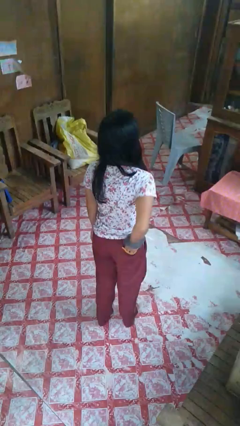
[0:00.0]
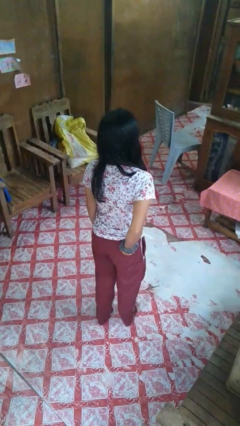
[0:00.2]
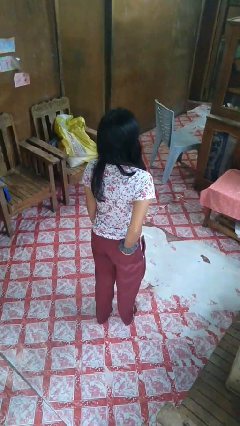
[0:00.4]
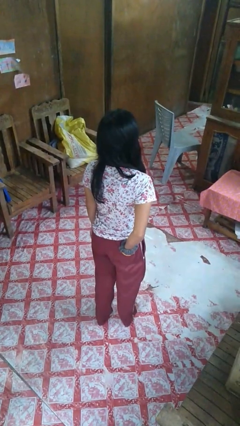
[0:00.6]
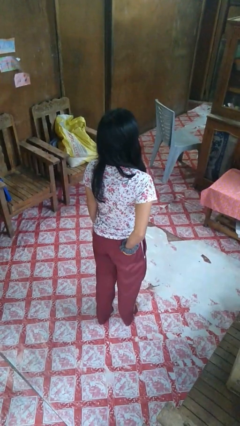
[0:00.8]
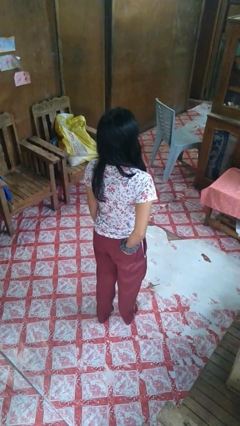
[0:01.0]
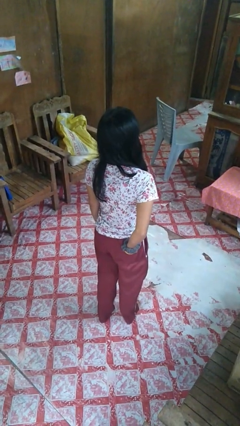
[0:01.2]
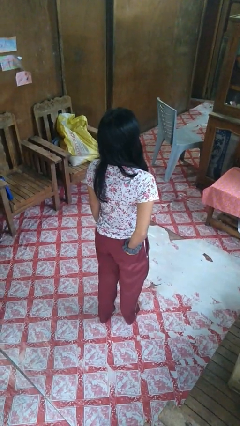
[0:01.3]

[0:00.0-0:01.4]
person puts hands in back pockets

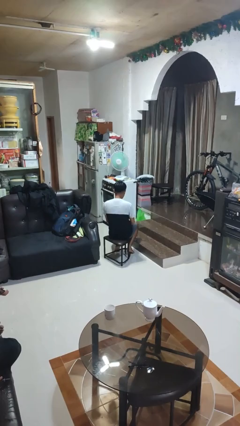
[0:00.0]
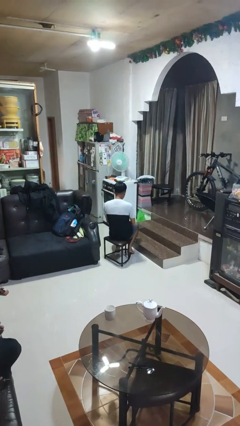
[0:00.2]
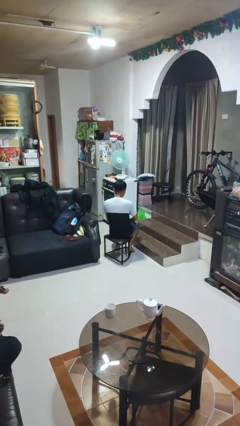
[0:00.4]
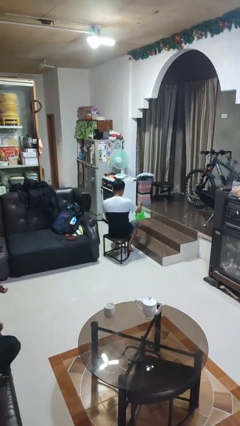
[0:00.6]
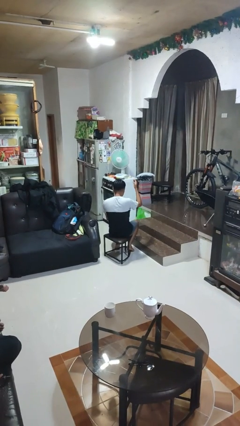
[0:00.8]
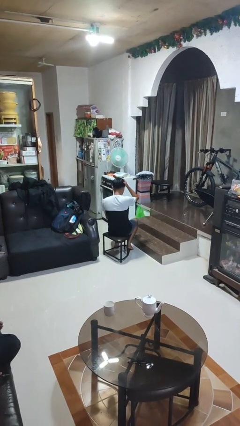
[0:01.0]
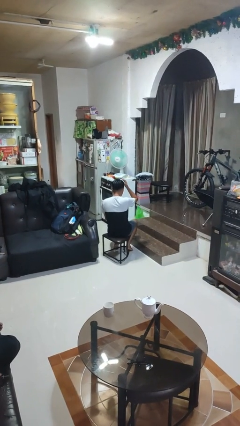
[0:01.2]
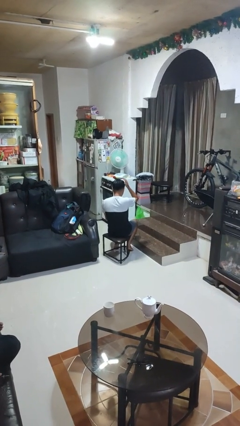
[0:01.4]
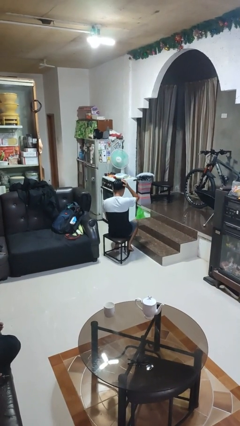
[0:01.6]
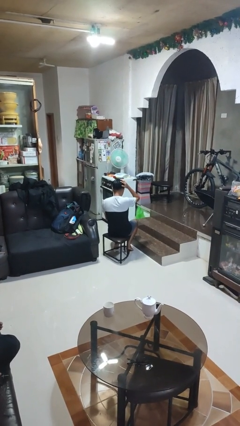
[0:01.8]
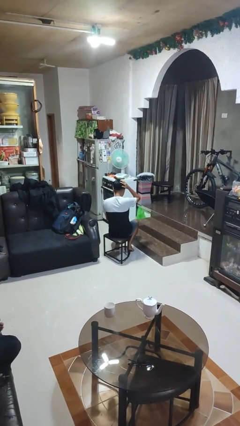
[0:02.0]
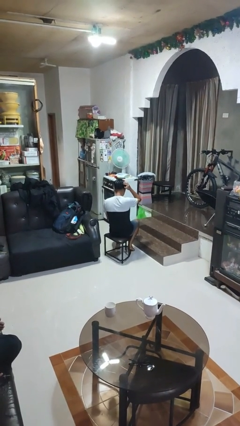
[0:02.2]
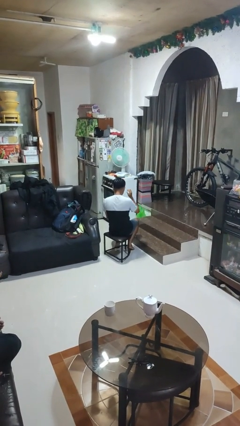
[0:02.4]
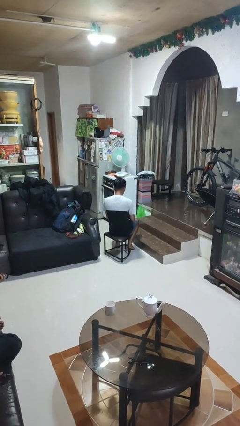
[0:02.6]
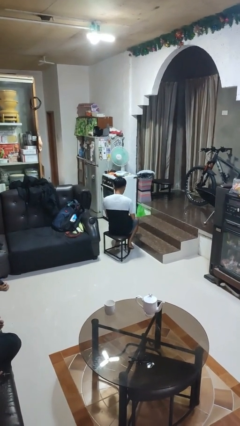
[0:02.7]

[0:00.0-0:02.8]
person pats head

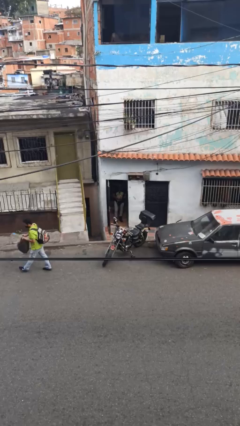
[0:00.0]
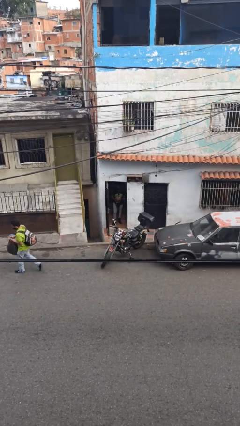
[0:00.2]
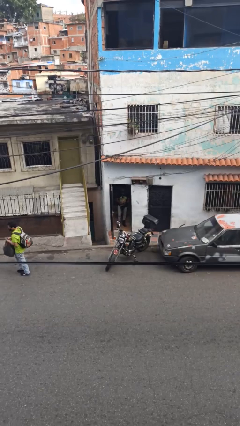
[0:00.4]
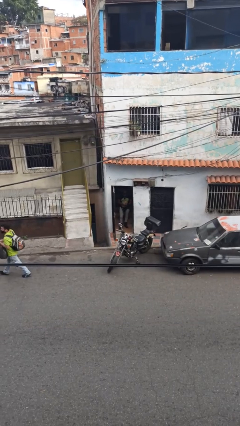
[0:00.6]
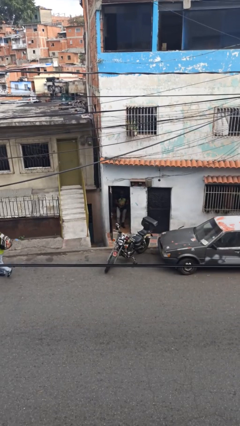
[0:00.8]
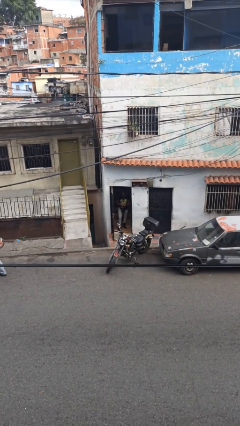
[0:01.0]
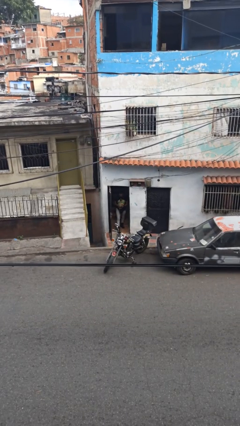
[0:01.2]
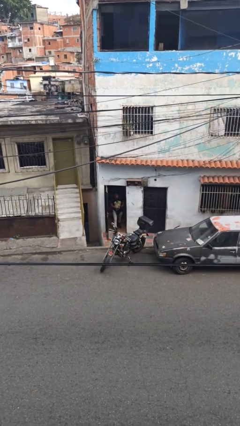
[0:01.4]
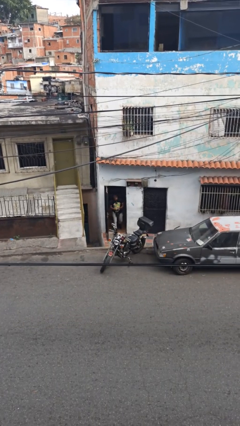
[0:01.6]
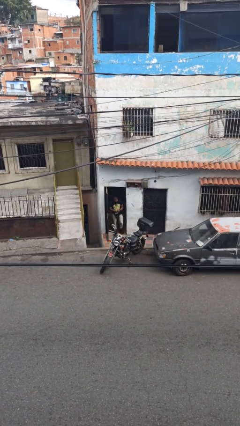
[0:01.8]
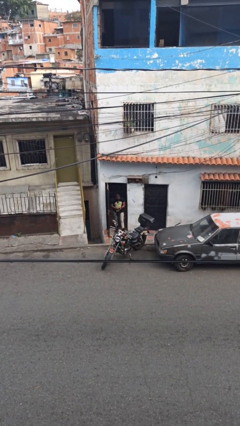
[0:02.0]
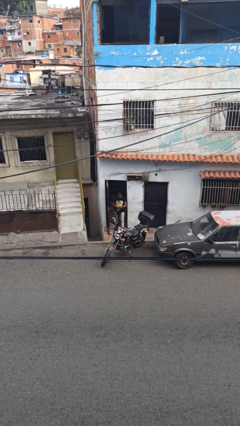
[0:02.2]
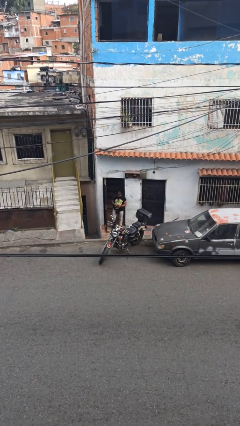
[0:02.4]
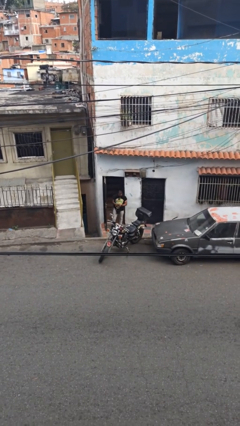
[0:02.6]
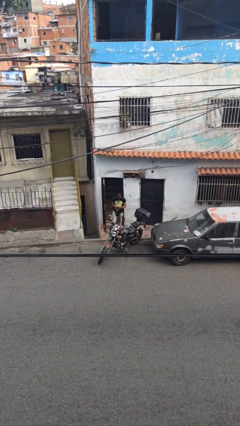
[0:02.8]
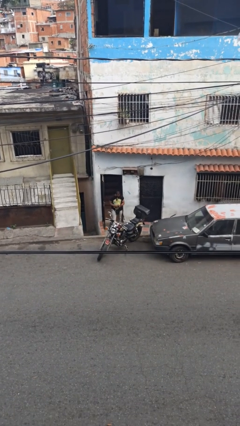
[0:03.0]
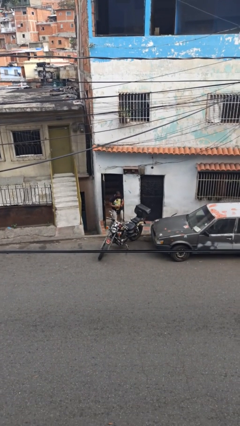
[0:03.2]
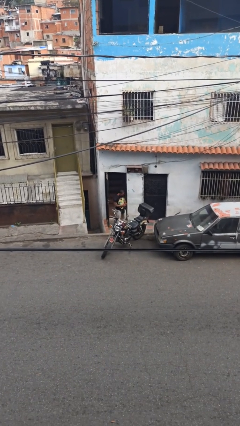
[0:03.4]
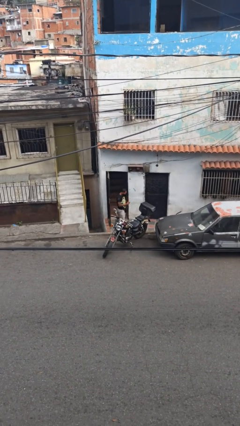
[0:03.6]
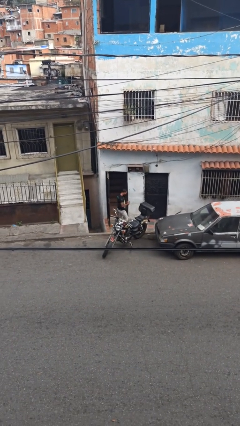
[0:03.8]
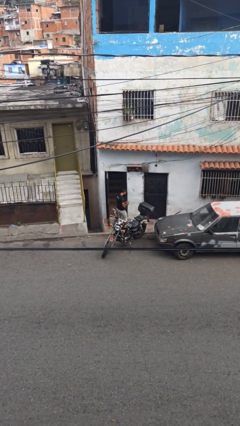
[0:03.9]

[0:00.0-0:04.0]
person enters scene through structure

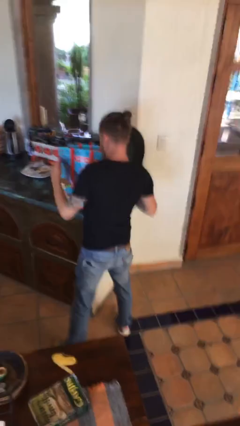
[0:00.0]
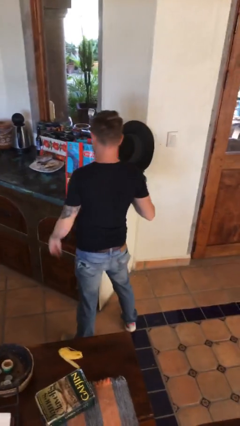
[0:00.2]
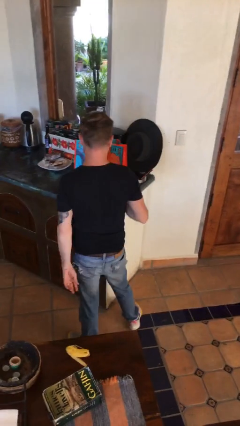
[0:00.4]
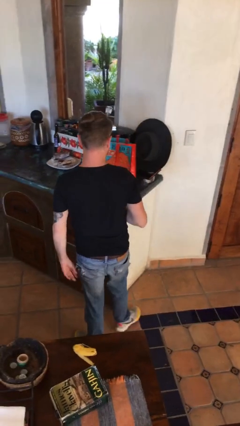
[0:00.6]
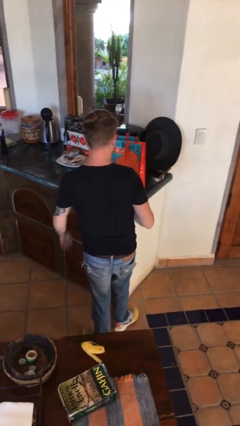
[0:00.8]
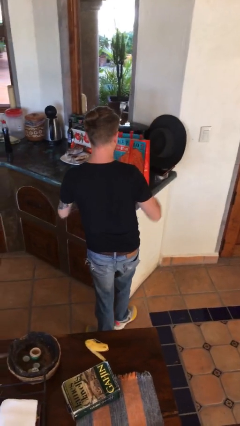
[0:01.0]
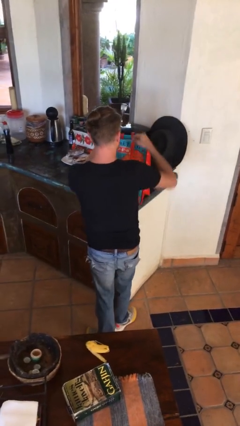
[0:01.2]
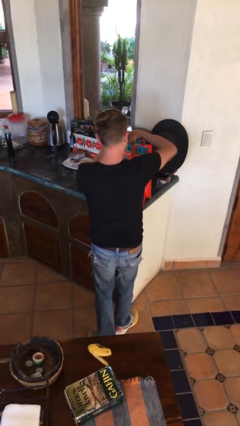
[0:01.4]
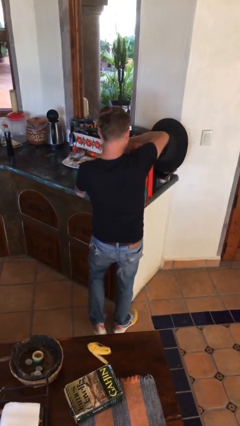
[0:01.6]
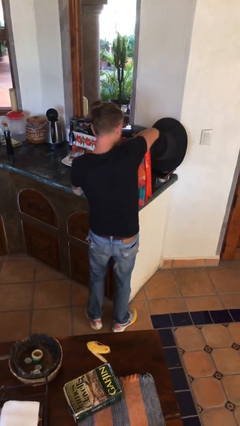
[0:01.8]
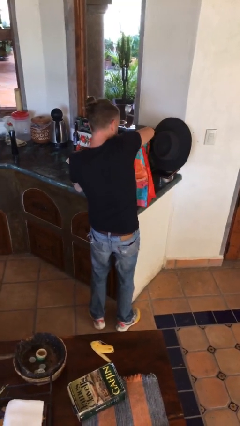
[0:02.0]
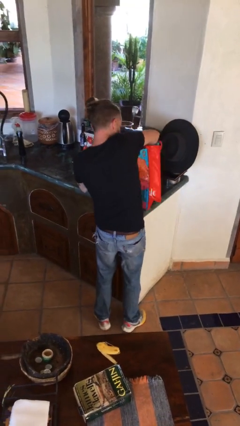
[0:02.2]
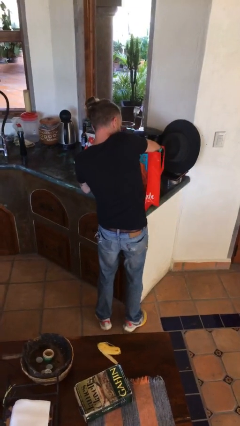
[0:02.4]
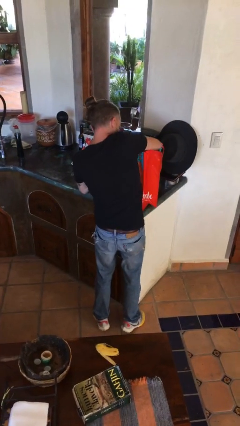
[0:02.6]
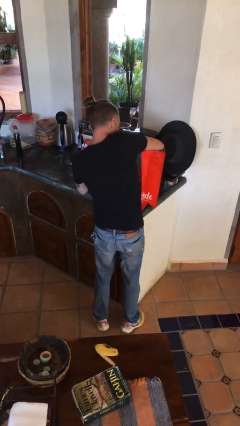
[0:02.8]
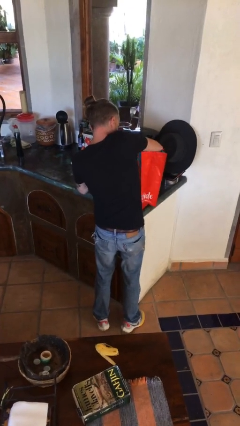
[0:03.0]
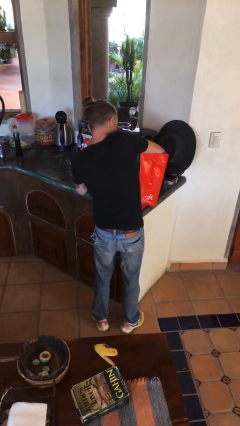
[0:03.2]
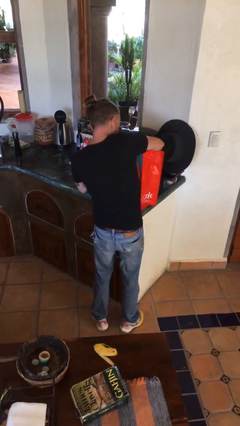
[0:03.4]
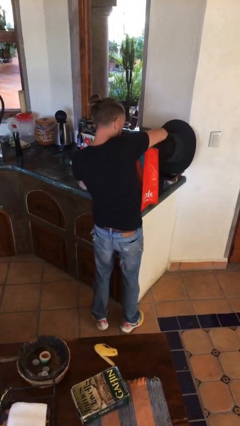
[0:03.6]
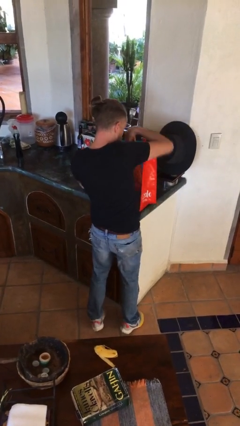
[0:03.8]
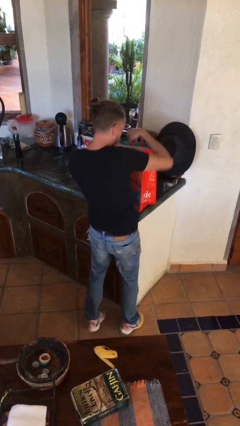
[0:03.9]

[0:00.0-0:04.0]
person searches in bag

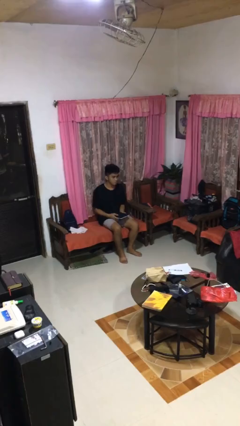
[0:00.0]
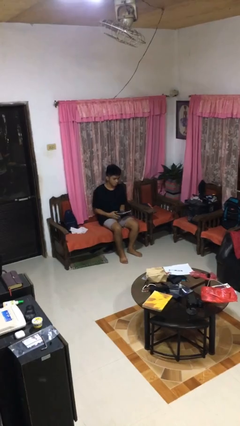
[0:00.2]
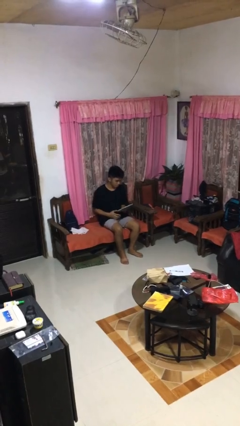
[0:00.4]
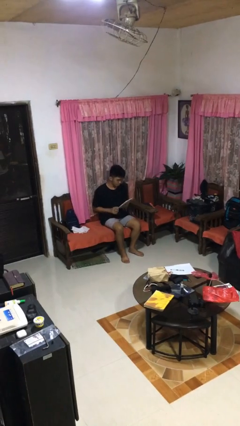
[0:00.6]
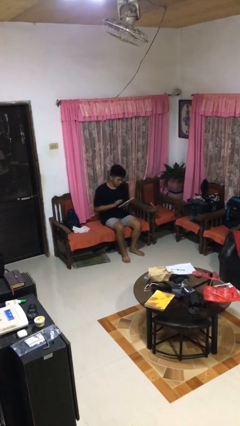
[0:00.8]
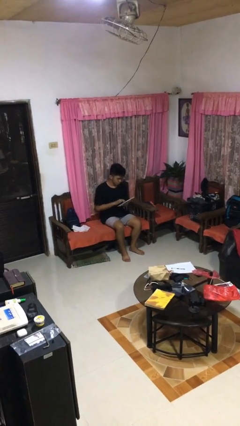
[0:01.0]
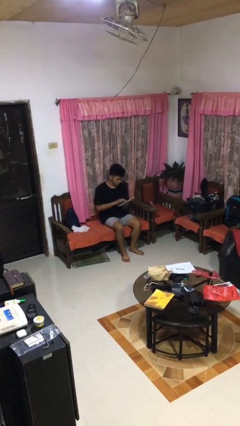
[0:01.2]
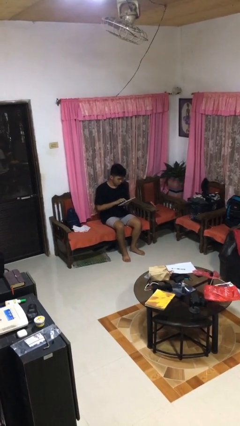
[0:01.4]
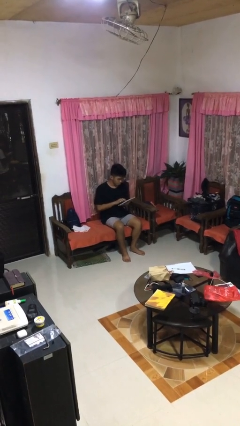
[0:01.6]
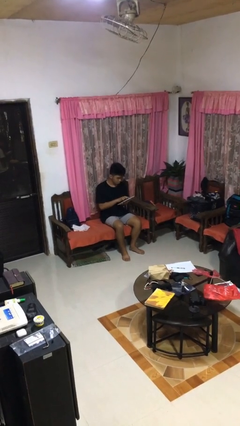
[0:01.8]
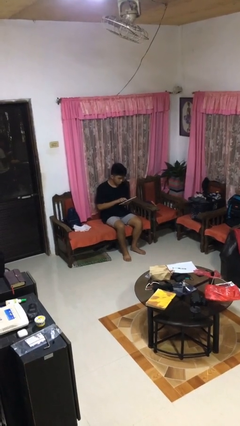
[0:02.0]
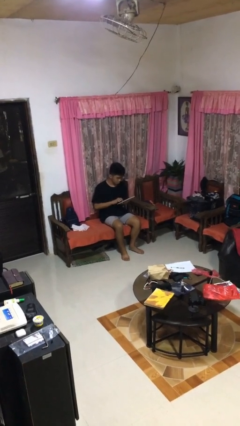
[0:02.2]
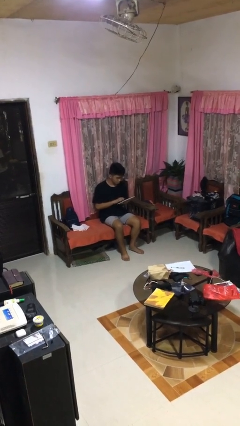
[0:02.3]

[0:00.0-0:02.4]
person interacts with tablet

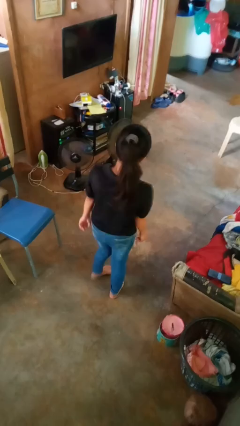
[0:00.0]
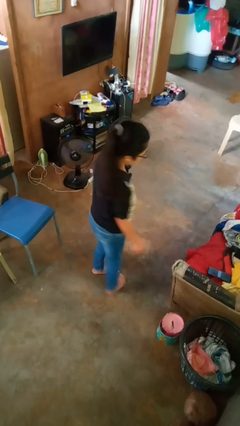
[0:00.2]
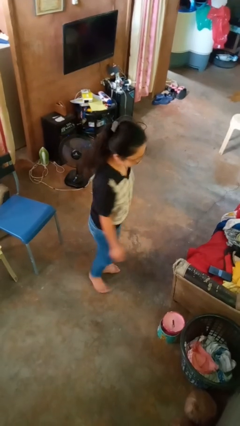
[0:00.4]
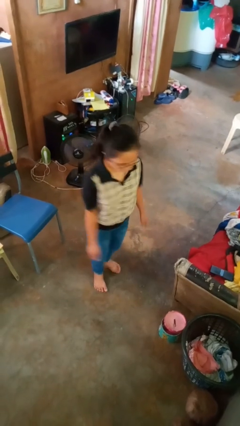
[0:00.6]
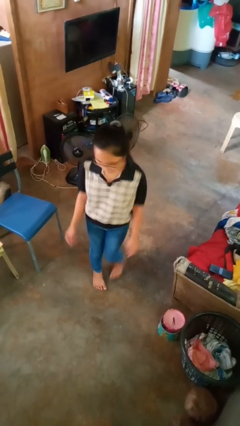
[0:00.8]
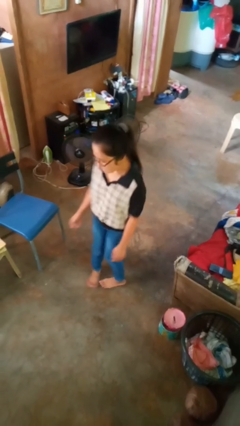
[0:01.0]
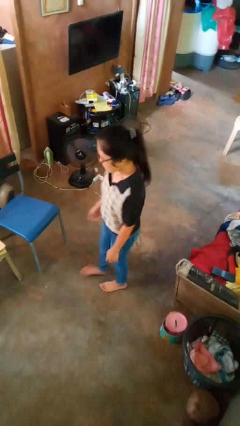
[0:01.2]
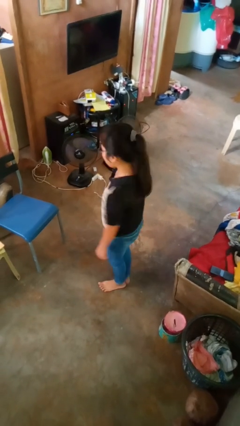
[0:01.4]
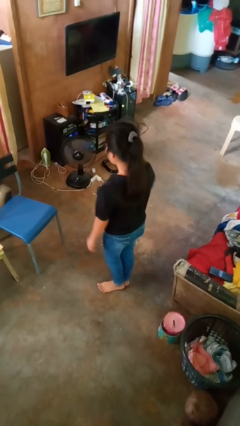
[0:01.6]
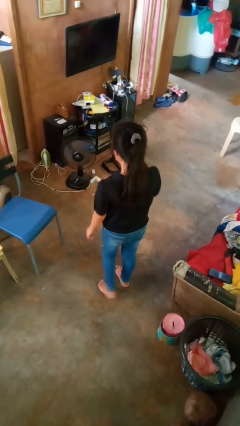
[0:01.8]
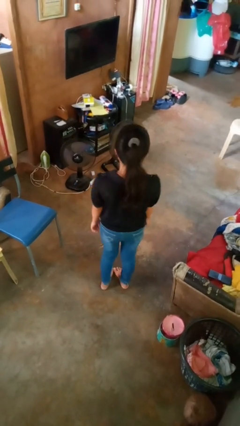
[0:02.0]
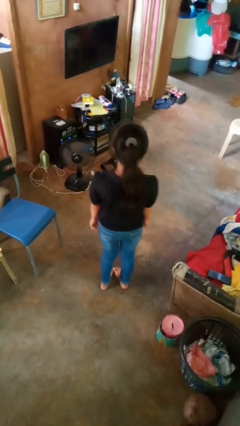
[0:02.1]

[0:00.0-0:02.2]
person twirls

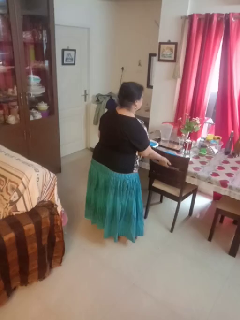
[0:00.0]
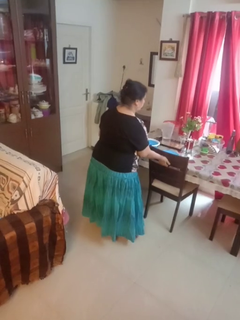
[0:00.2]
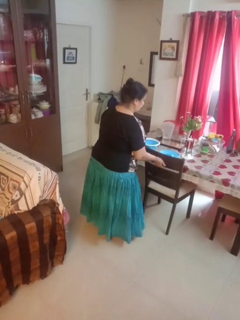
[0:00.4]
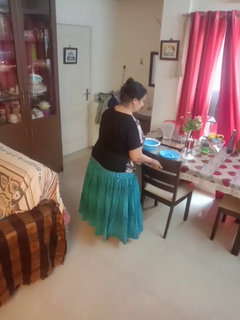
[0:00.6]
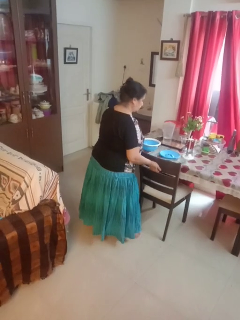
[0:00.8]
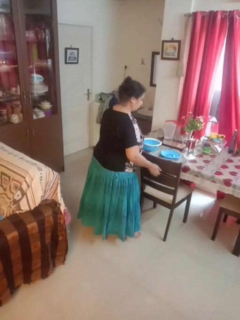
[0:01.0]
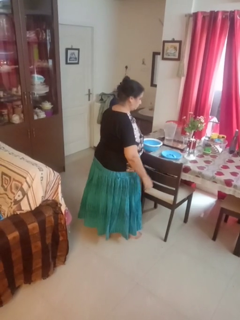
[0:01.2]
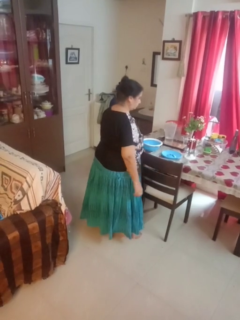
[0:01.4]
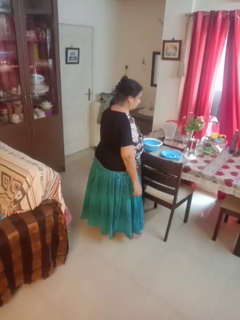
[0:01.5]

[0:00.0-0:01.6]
person pulls out chair
